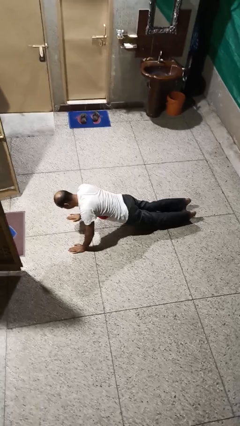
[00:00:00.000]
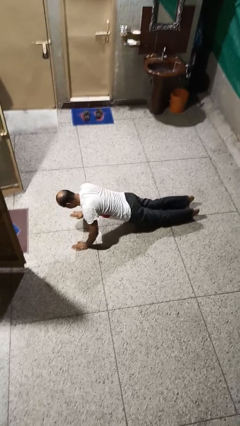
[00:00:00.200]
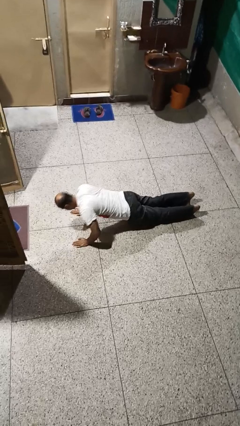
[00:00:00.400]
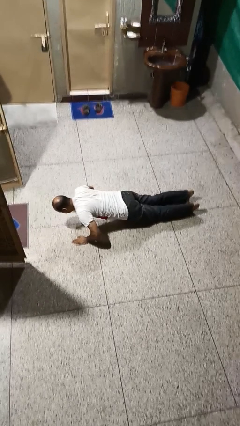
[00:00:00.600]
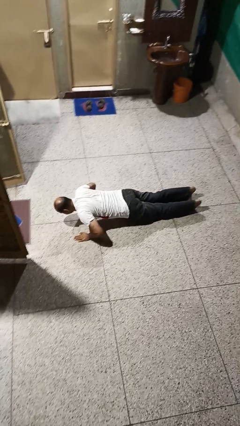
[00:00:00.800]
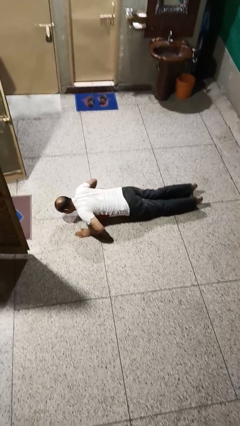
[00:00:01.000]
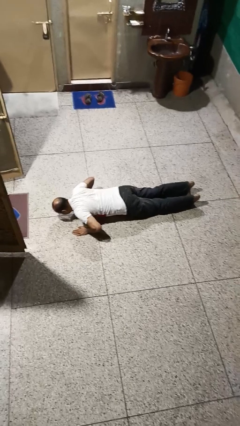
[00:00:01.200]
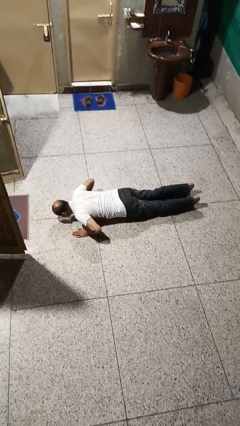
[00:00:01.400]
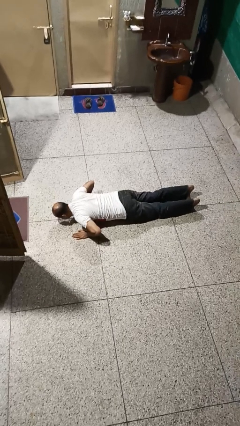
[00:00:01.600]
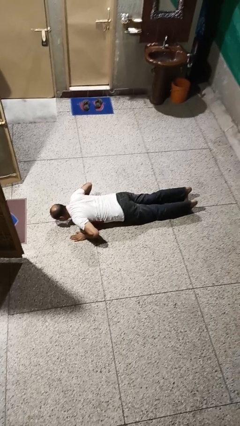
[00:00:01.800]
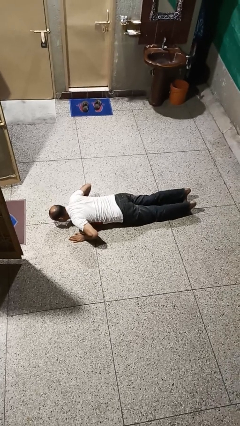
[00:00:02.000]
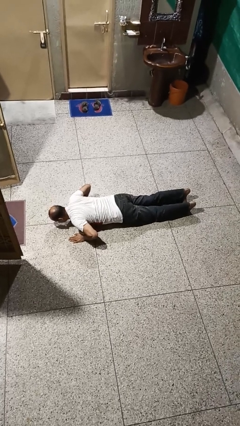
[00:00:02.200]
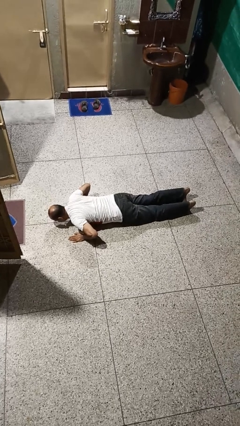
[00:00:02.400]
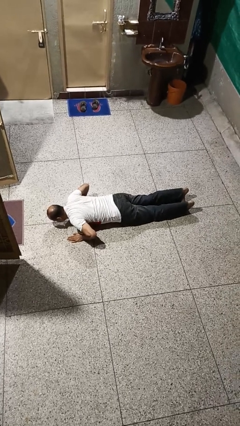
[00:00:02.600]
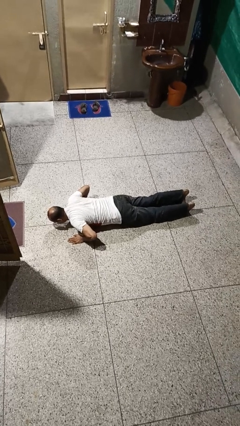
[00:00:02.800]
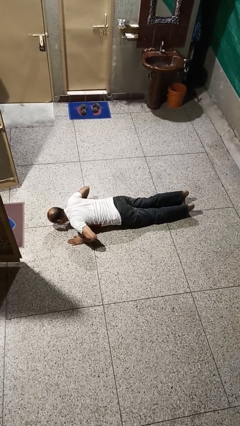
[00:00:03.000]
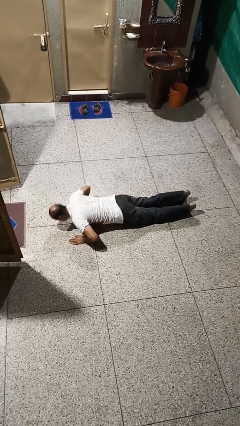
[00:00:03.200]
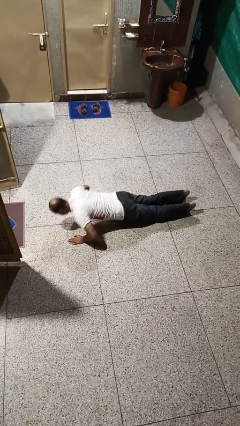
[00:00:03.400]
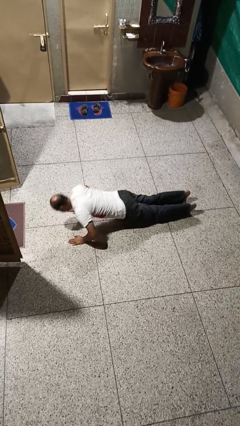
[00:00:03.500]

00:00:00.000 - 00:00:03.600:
person exercises with pushup

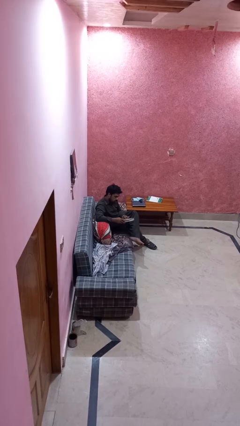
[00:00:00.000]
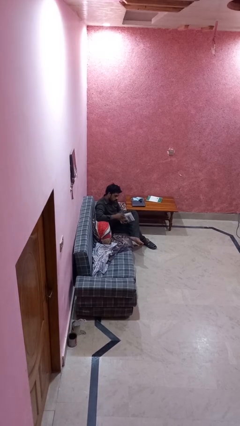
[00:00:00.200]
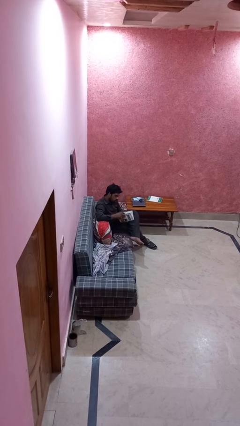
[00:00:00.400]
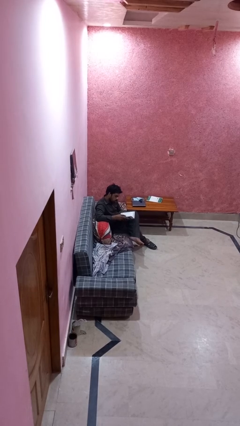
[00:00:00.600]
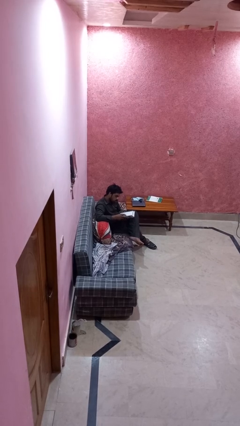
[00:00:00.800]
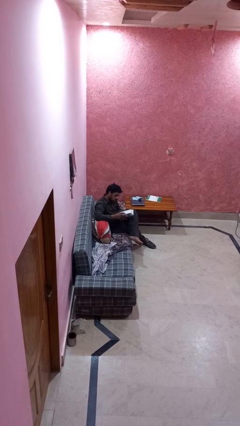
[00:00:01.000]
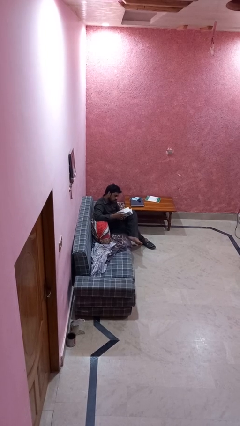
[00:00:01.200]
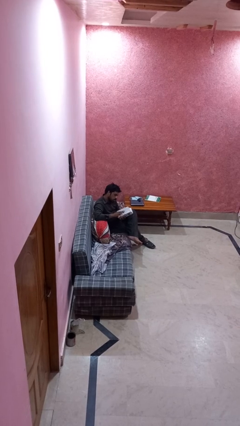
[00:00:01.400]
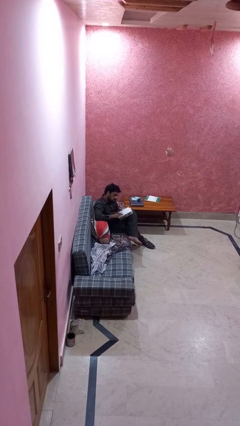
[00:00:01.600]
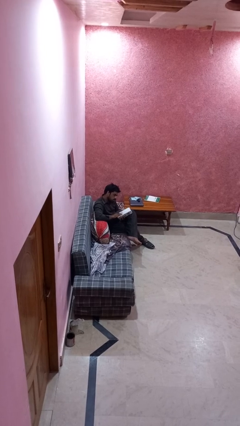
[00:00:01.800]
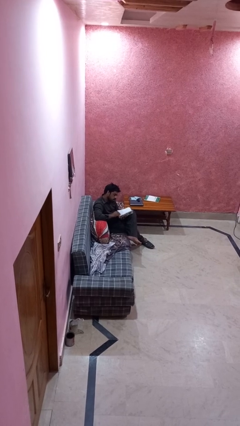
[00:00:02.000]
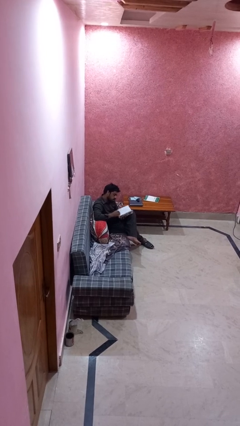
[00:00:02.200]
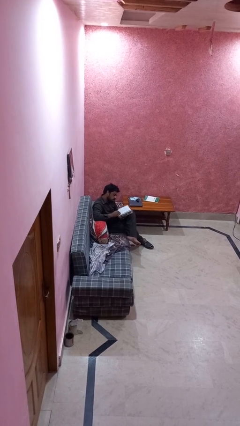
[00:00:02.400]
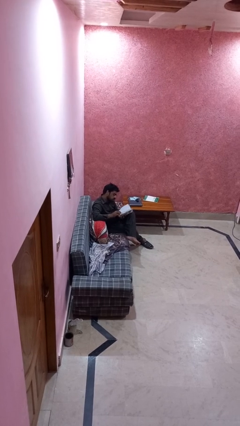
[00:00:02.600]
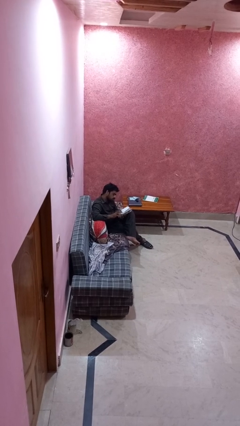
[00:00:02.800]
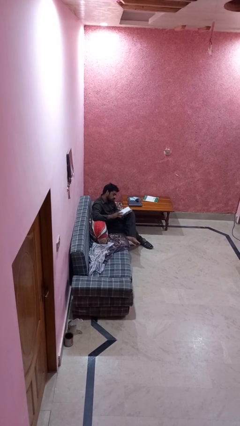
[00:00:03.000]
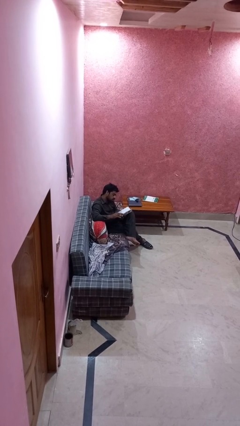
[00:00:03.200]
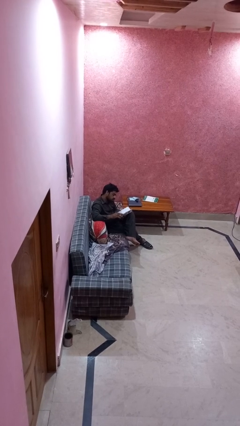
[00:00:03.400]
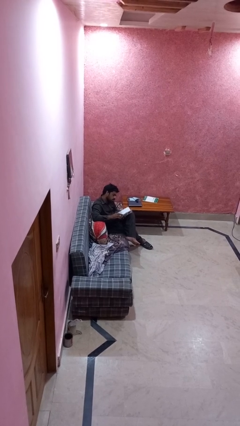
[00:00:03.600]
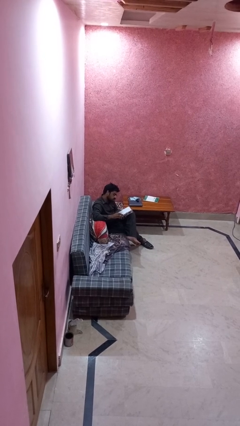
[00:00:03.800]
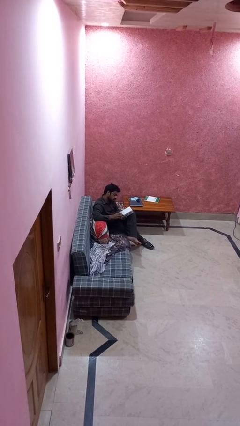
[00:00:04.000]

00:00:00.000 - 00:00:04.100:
person reads book

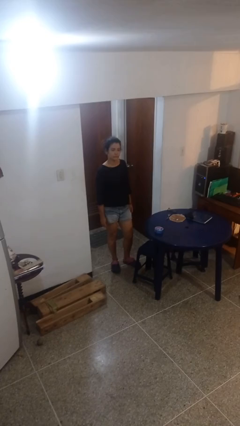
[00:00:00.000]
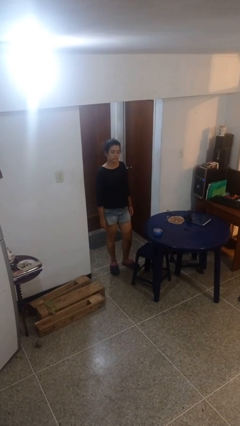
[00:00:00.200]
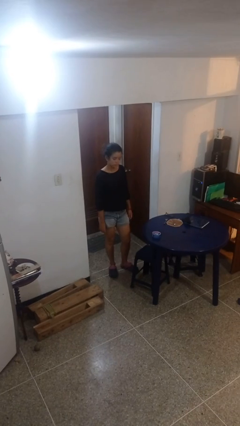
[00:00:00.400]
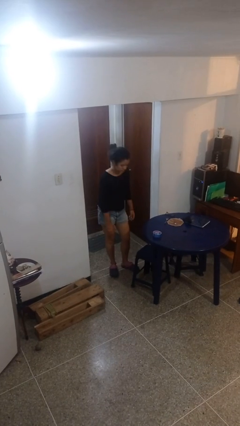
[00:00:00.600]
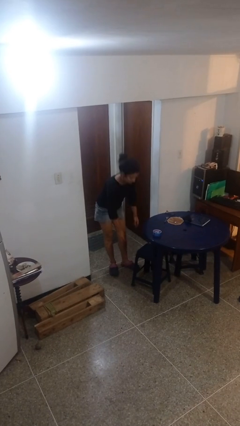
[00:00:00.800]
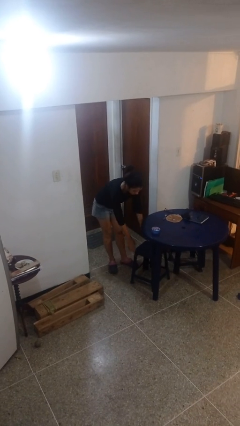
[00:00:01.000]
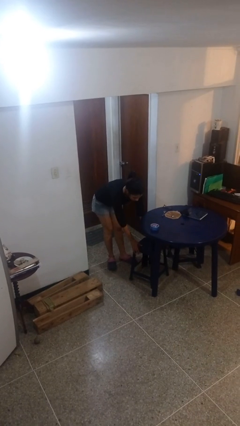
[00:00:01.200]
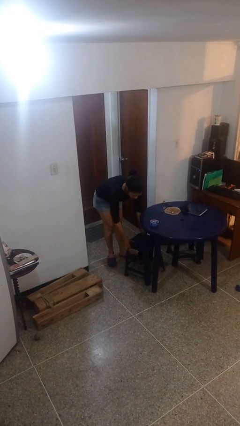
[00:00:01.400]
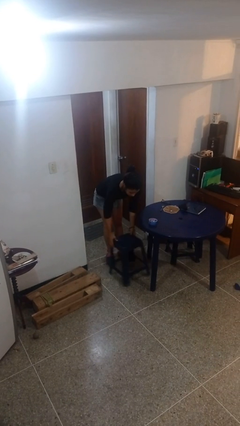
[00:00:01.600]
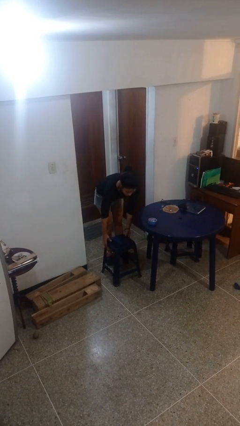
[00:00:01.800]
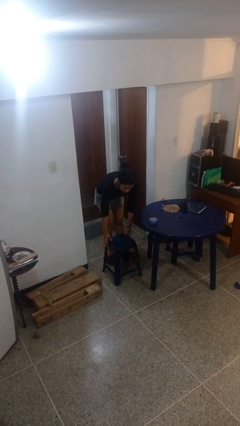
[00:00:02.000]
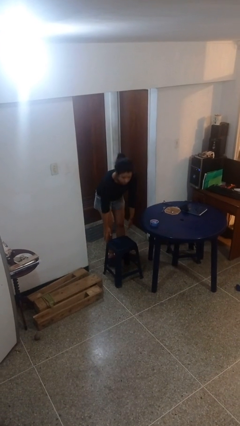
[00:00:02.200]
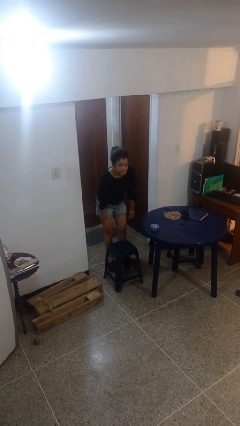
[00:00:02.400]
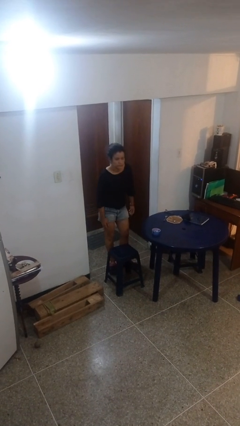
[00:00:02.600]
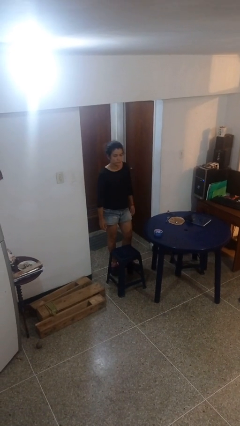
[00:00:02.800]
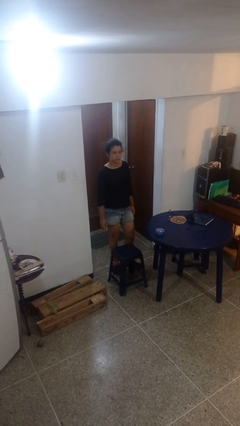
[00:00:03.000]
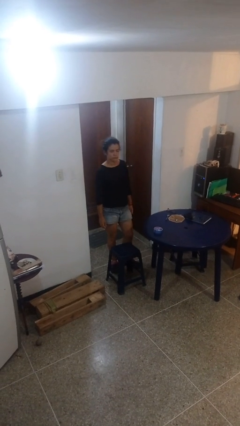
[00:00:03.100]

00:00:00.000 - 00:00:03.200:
person pulls out chair

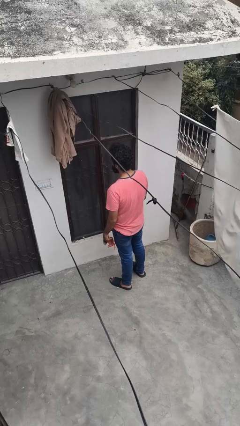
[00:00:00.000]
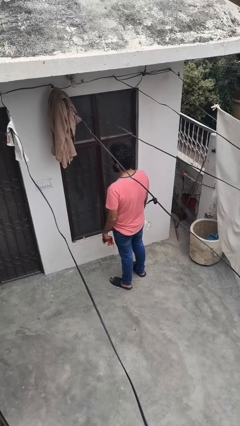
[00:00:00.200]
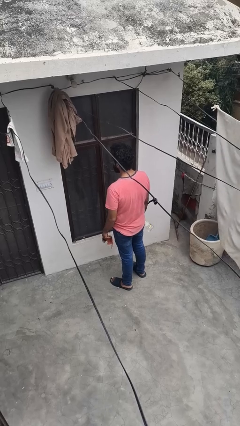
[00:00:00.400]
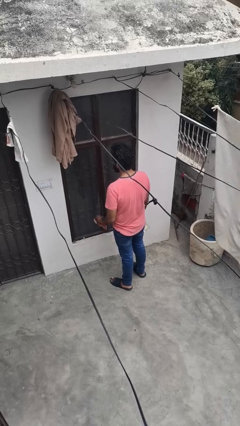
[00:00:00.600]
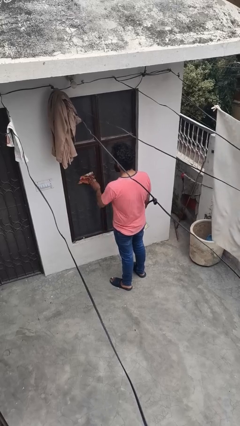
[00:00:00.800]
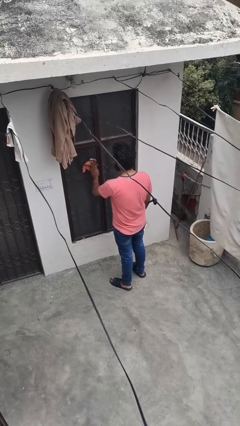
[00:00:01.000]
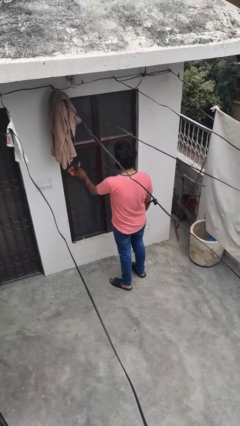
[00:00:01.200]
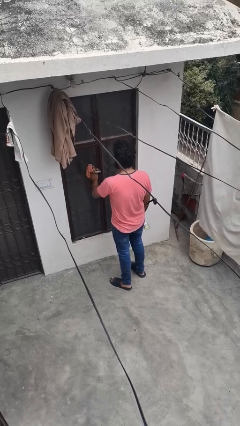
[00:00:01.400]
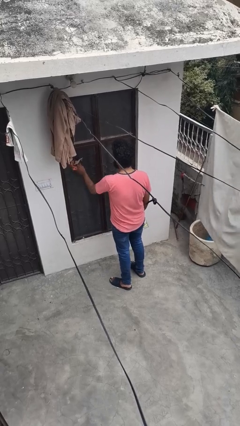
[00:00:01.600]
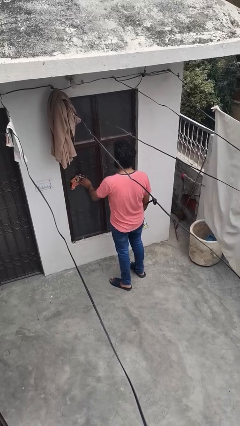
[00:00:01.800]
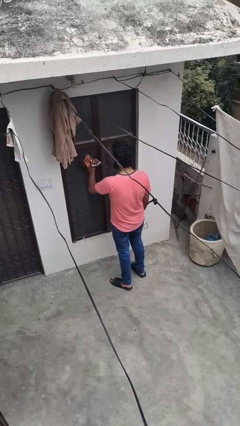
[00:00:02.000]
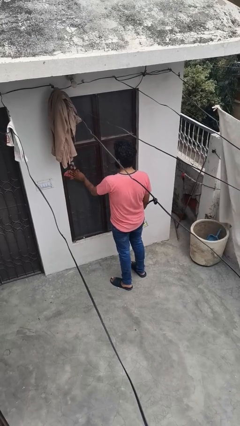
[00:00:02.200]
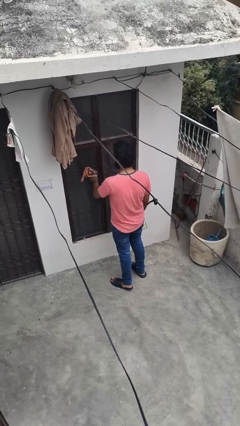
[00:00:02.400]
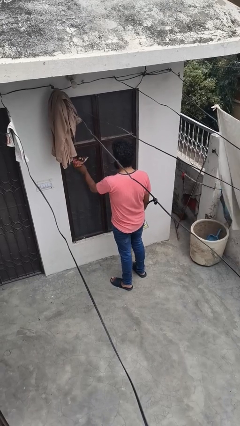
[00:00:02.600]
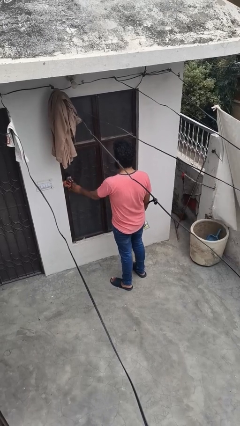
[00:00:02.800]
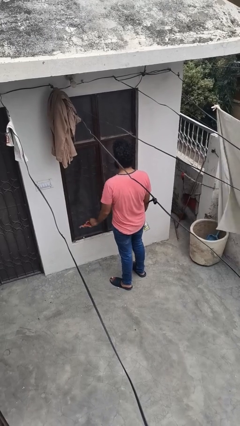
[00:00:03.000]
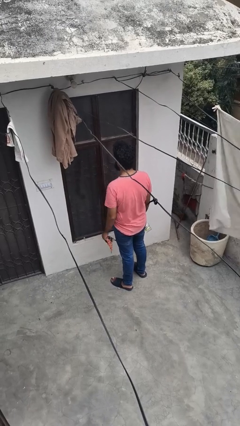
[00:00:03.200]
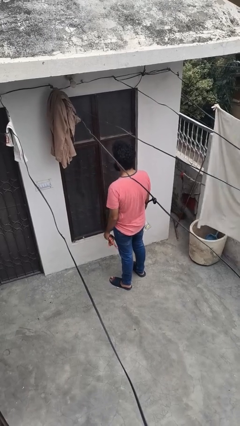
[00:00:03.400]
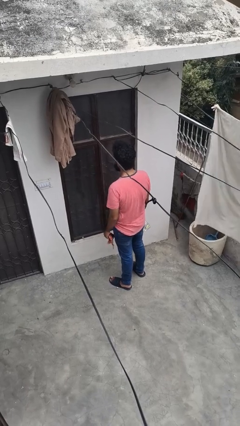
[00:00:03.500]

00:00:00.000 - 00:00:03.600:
person washes window

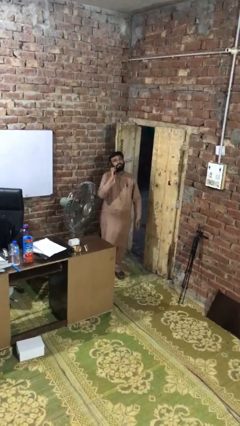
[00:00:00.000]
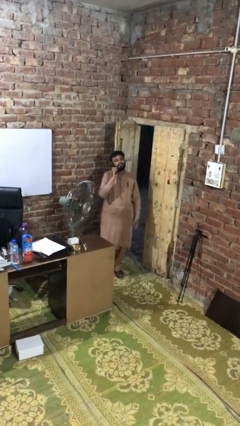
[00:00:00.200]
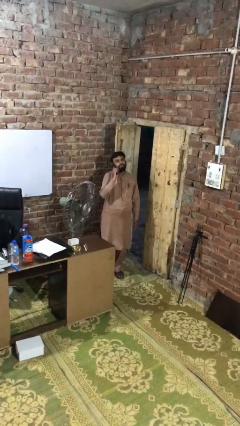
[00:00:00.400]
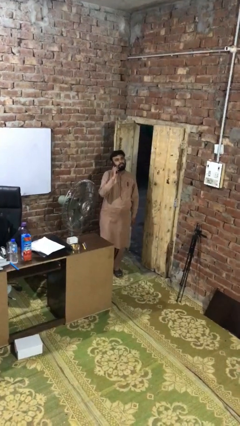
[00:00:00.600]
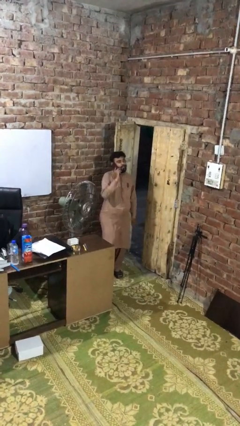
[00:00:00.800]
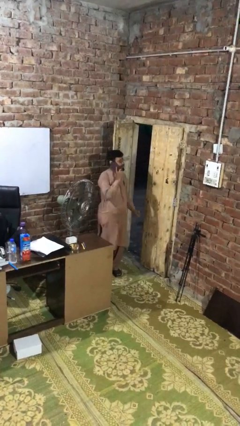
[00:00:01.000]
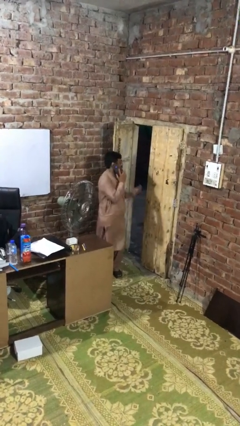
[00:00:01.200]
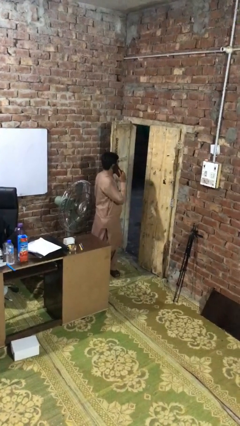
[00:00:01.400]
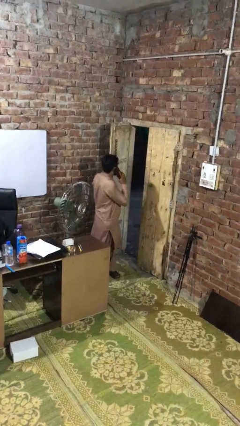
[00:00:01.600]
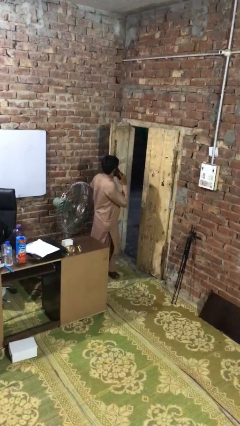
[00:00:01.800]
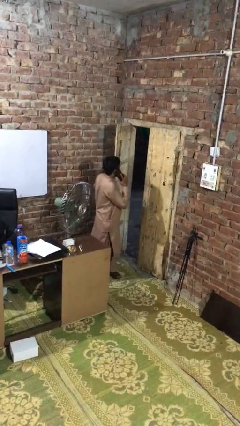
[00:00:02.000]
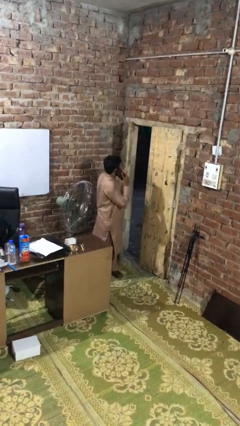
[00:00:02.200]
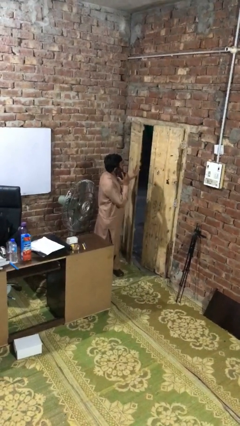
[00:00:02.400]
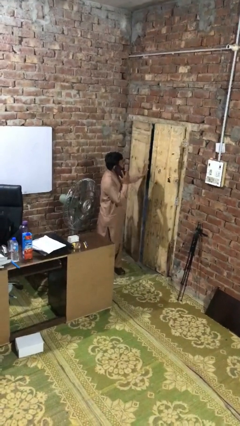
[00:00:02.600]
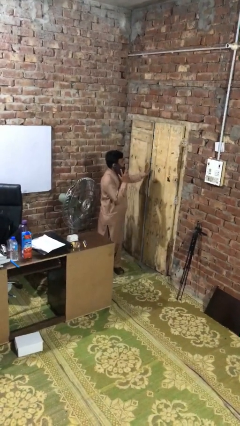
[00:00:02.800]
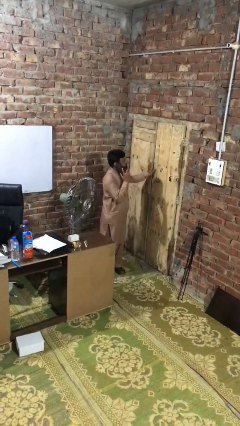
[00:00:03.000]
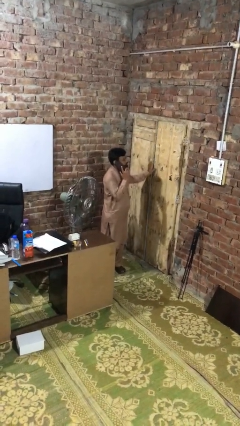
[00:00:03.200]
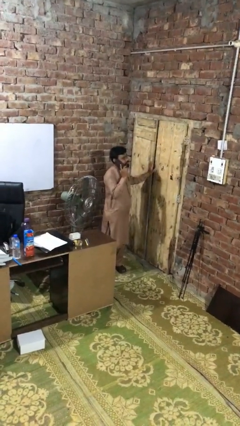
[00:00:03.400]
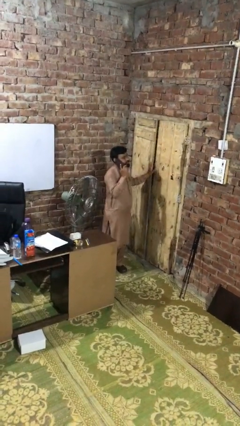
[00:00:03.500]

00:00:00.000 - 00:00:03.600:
person closes facility door
